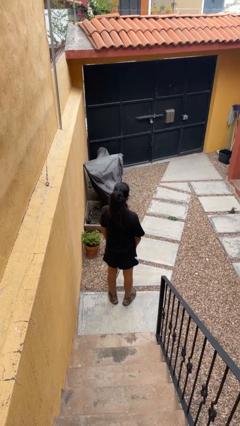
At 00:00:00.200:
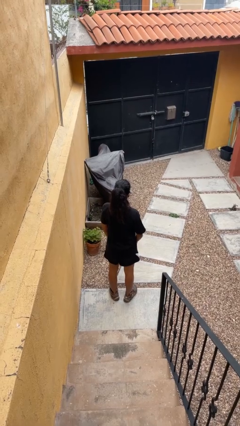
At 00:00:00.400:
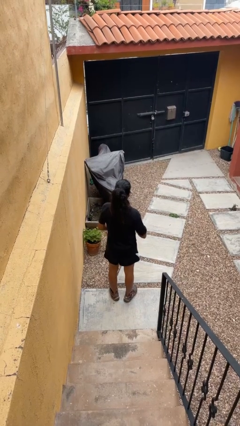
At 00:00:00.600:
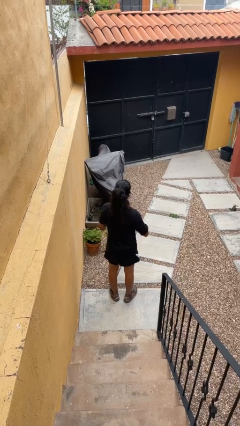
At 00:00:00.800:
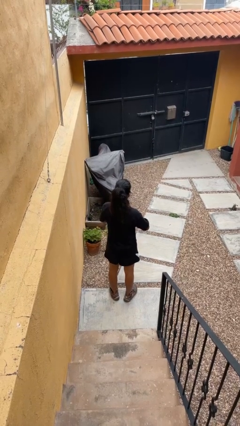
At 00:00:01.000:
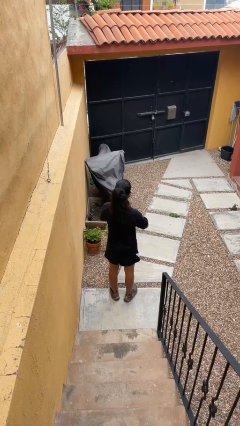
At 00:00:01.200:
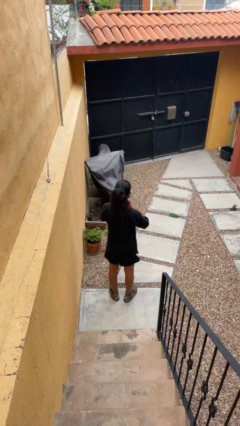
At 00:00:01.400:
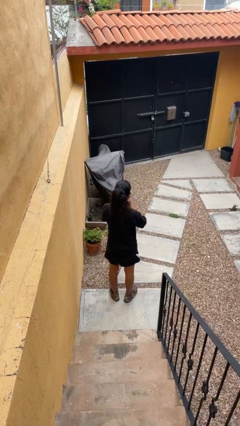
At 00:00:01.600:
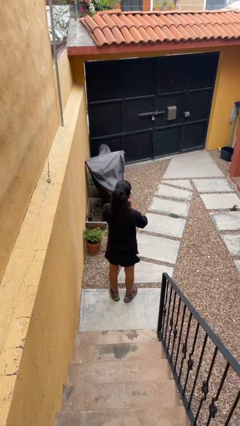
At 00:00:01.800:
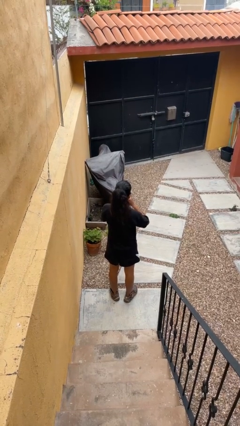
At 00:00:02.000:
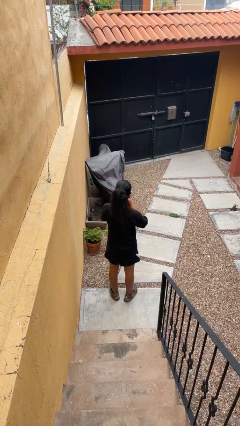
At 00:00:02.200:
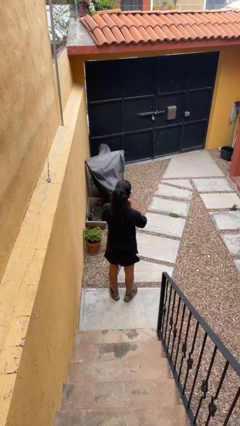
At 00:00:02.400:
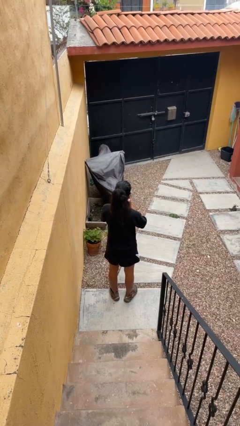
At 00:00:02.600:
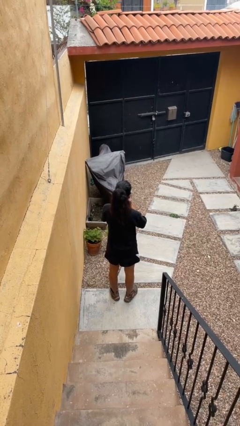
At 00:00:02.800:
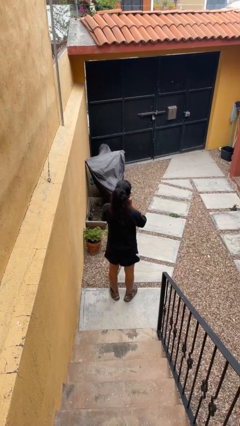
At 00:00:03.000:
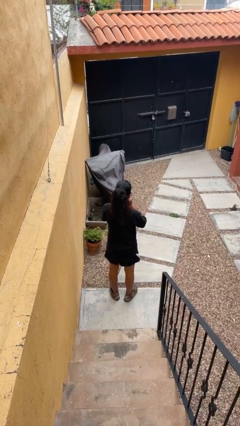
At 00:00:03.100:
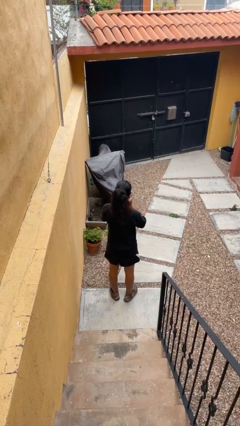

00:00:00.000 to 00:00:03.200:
person cracks knuckles

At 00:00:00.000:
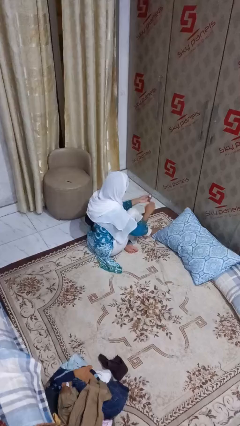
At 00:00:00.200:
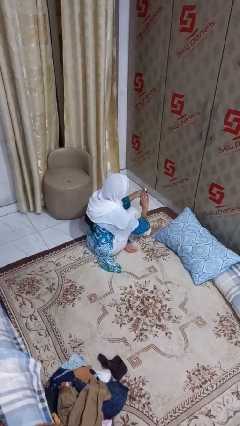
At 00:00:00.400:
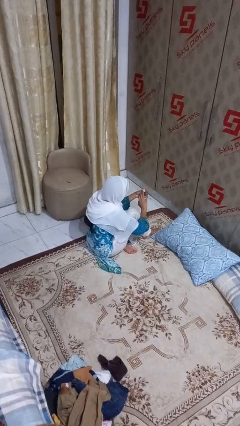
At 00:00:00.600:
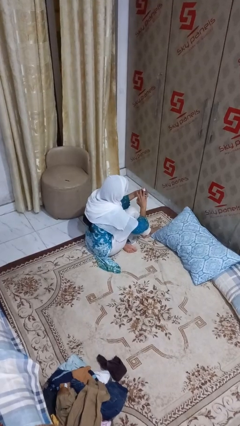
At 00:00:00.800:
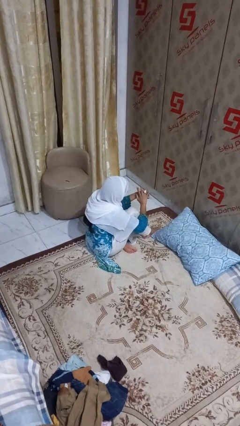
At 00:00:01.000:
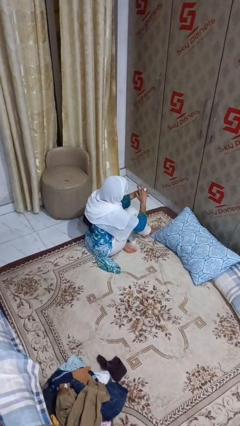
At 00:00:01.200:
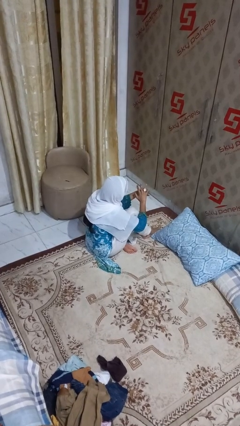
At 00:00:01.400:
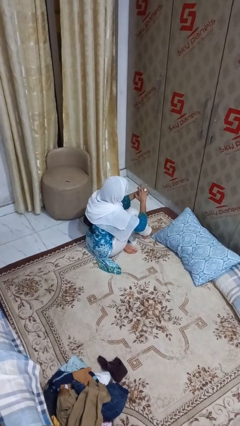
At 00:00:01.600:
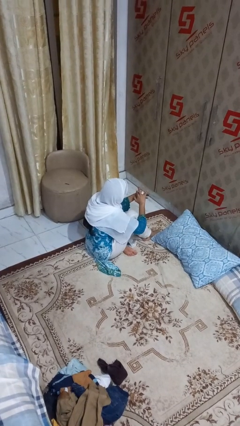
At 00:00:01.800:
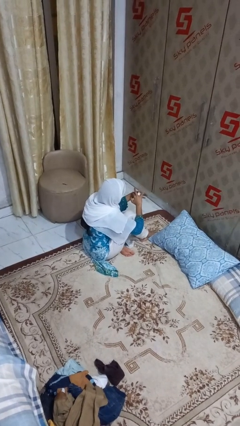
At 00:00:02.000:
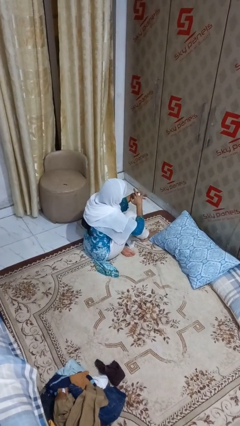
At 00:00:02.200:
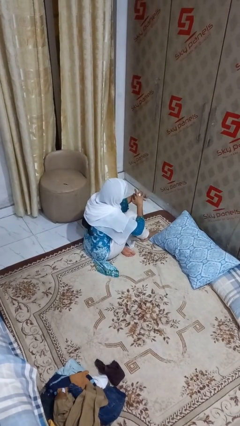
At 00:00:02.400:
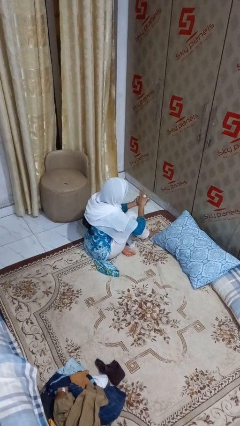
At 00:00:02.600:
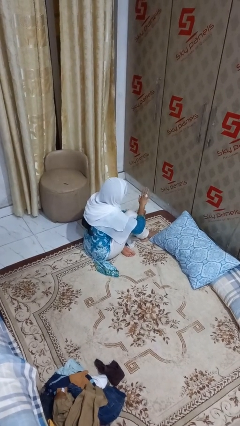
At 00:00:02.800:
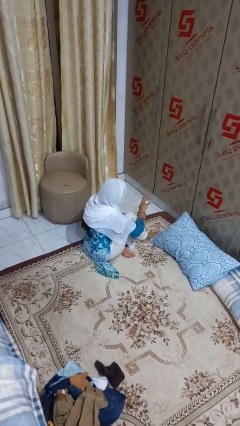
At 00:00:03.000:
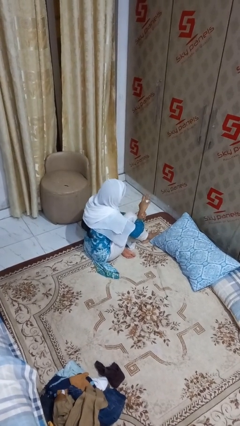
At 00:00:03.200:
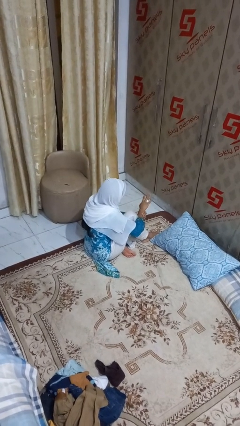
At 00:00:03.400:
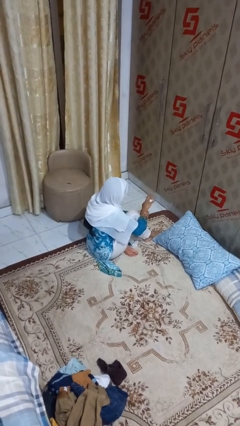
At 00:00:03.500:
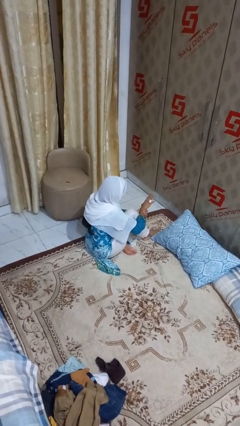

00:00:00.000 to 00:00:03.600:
person puts on ring

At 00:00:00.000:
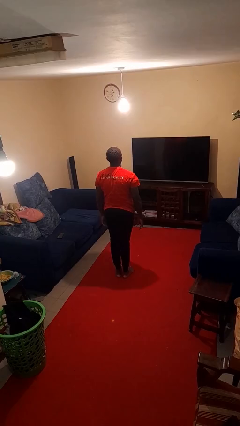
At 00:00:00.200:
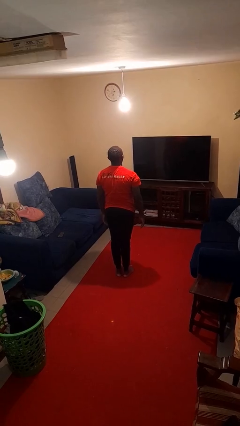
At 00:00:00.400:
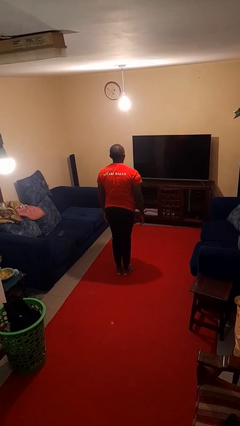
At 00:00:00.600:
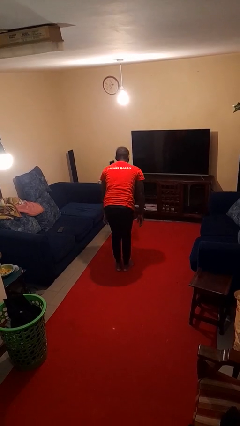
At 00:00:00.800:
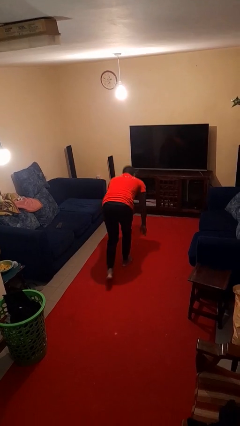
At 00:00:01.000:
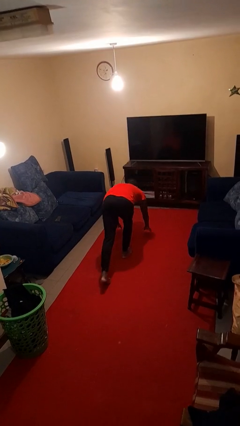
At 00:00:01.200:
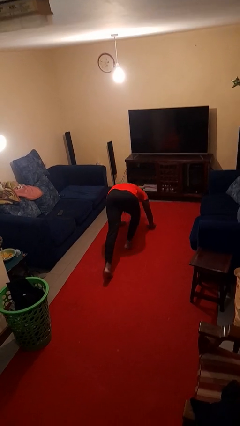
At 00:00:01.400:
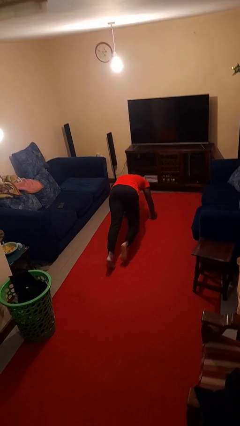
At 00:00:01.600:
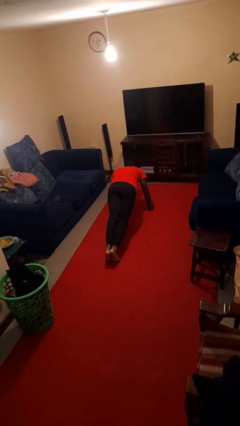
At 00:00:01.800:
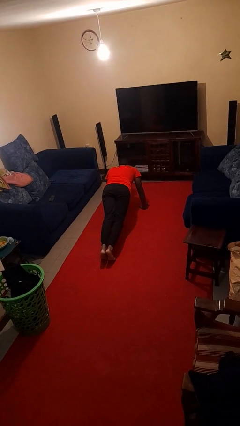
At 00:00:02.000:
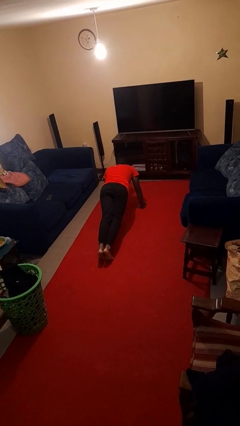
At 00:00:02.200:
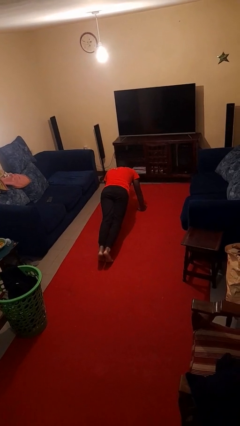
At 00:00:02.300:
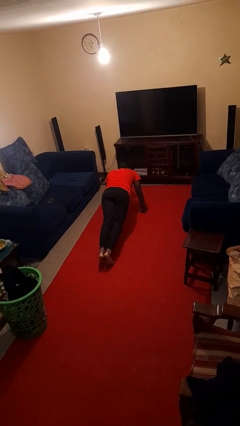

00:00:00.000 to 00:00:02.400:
person exercises with plank

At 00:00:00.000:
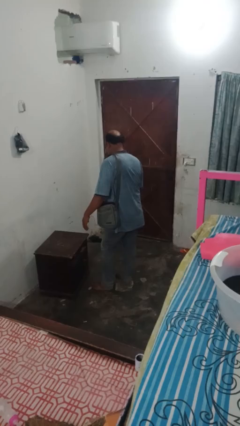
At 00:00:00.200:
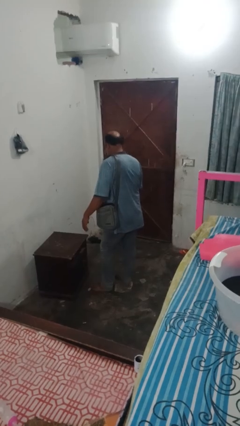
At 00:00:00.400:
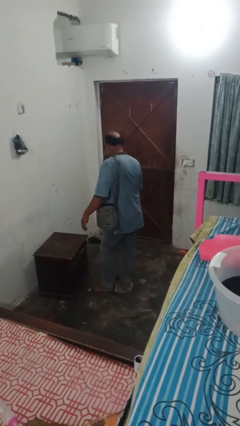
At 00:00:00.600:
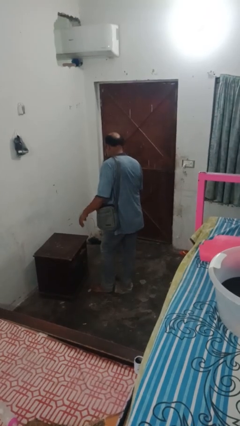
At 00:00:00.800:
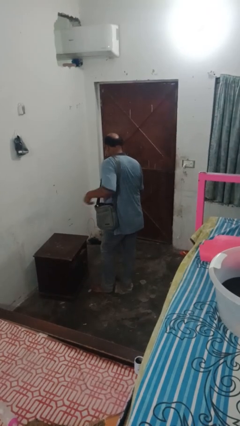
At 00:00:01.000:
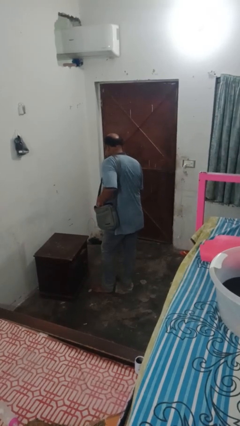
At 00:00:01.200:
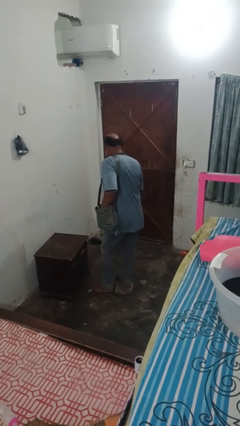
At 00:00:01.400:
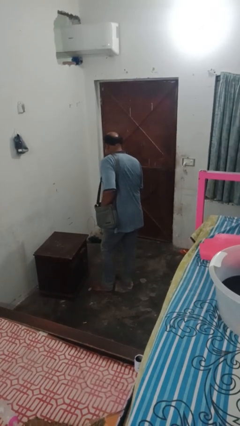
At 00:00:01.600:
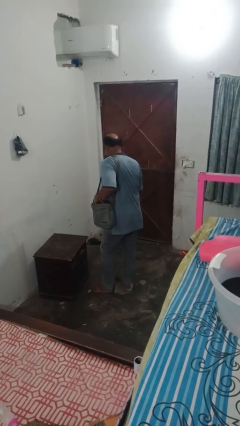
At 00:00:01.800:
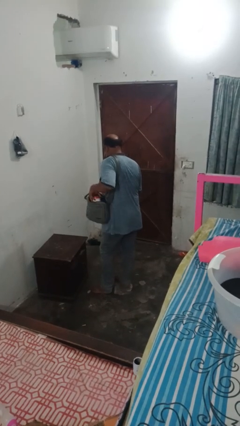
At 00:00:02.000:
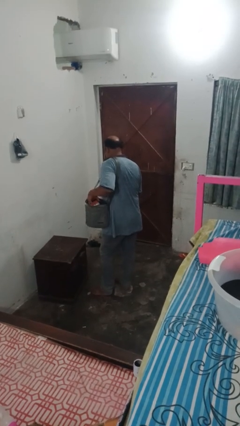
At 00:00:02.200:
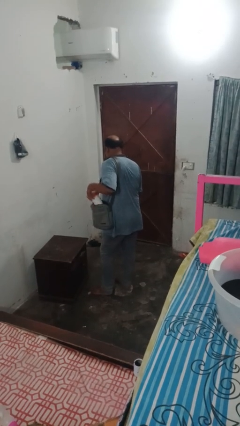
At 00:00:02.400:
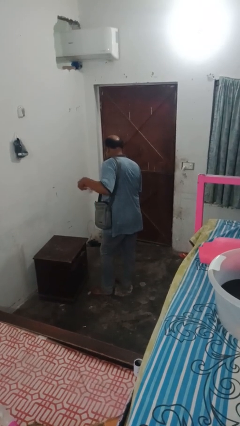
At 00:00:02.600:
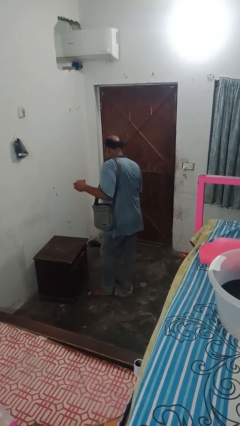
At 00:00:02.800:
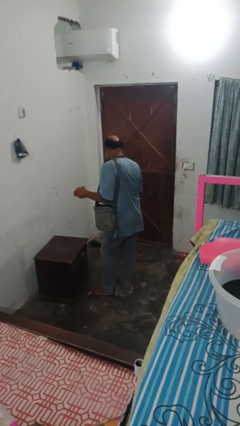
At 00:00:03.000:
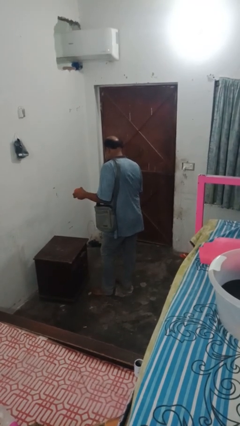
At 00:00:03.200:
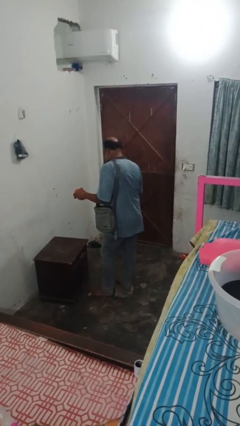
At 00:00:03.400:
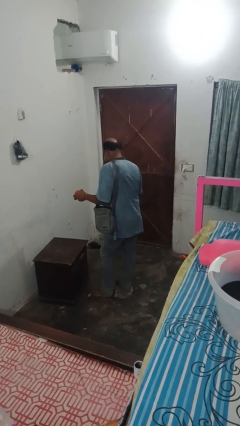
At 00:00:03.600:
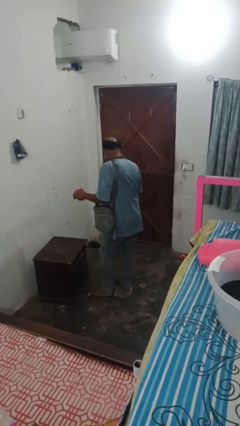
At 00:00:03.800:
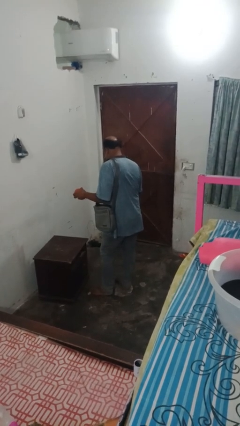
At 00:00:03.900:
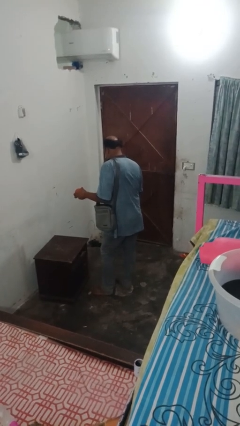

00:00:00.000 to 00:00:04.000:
person takes object from bag

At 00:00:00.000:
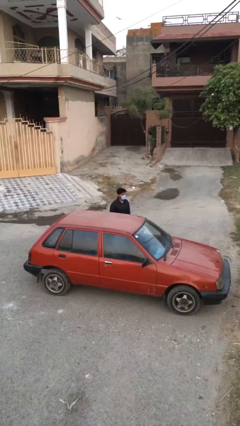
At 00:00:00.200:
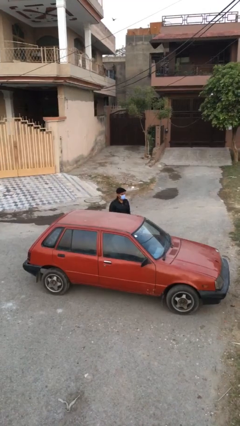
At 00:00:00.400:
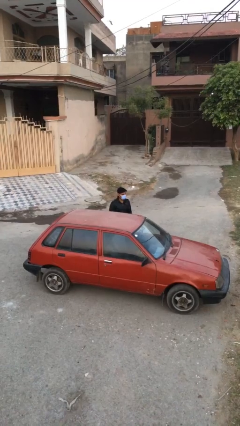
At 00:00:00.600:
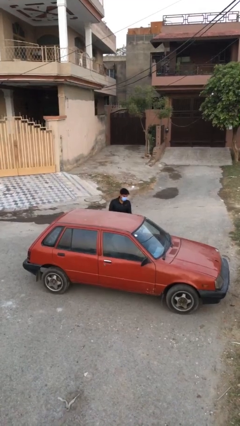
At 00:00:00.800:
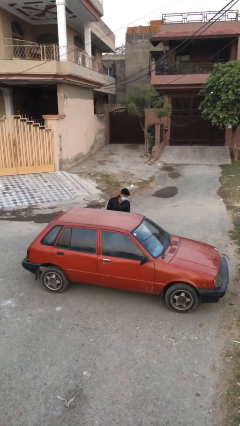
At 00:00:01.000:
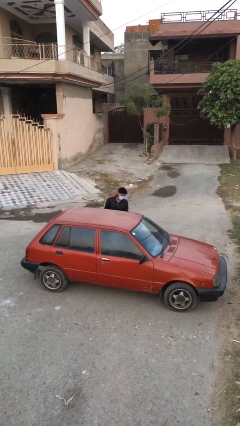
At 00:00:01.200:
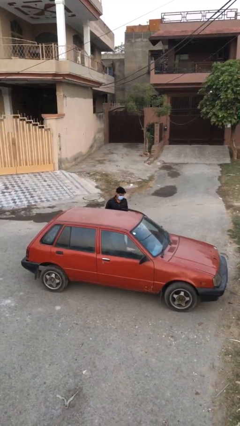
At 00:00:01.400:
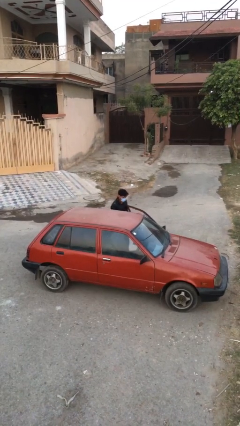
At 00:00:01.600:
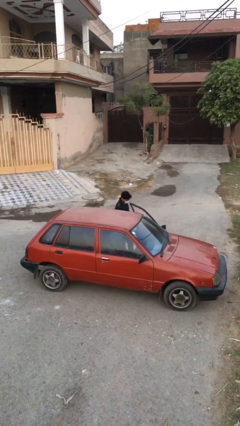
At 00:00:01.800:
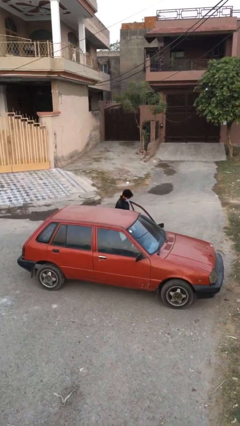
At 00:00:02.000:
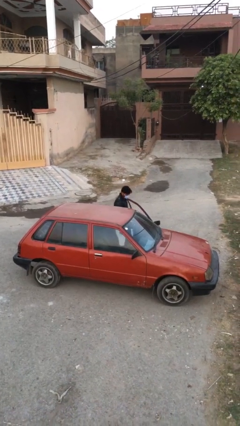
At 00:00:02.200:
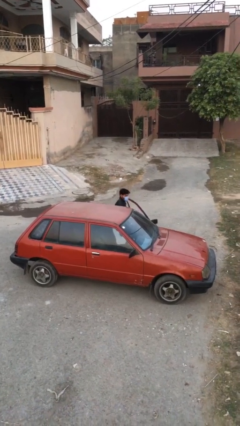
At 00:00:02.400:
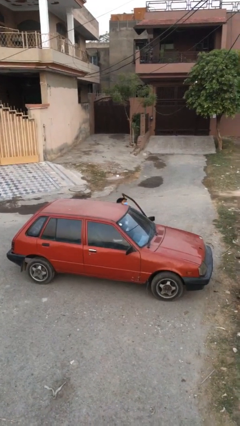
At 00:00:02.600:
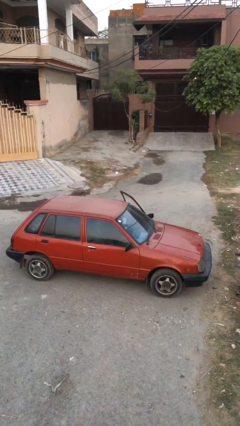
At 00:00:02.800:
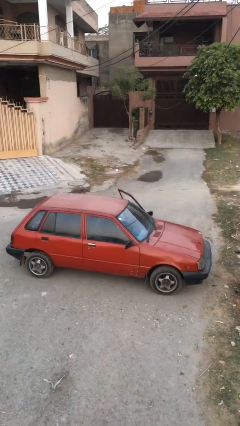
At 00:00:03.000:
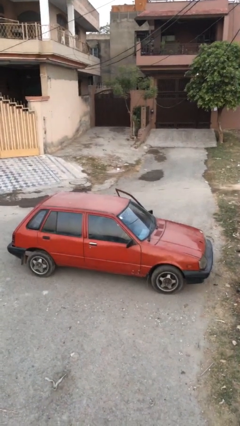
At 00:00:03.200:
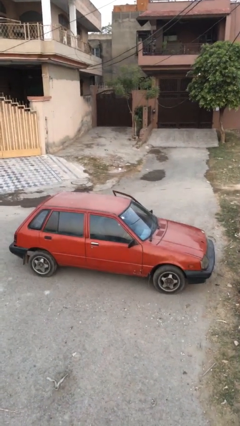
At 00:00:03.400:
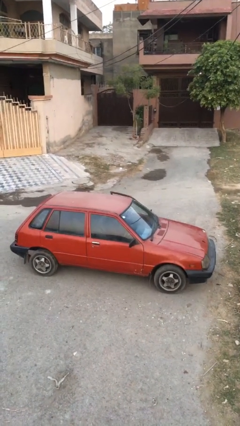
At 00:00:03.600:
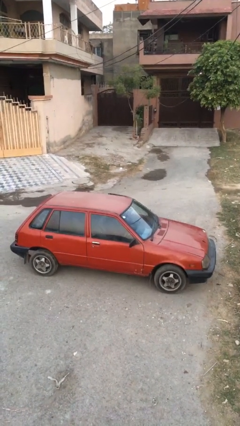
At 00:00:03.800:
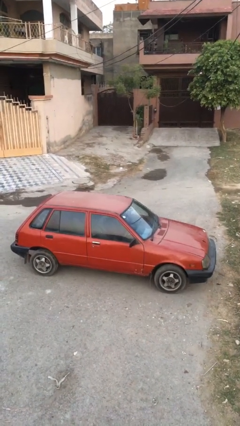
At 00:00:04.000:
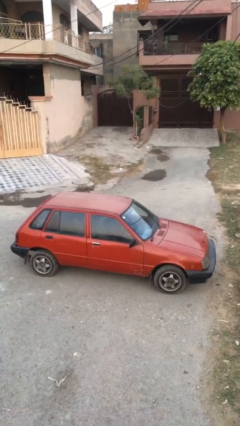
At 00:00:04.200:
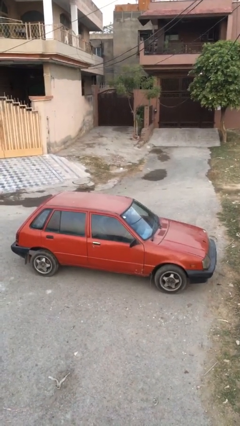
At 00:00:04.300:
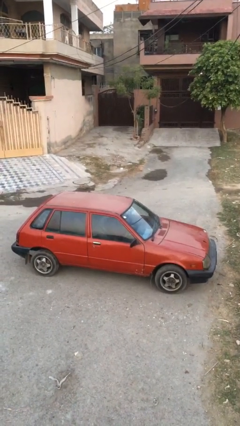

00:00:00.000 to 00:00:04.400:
person enters car
